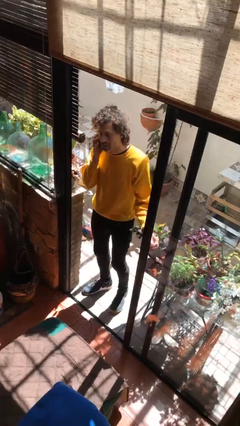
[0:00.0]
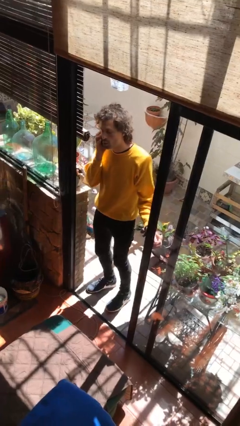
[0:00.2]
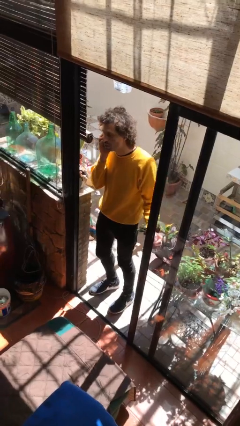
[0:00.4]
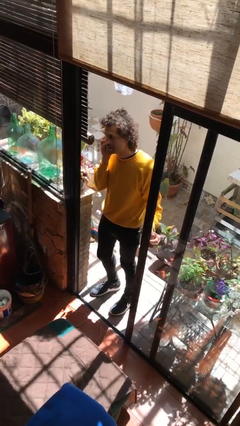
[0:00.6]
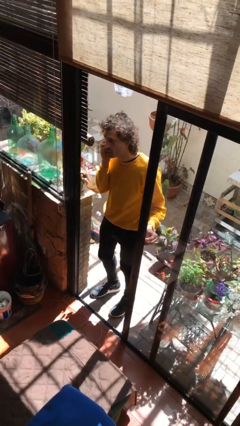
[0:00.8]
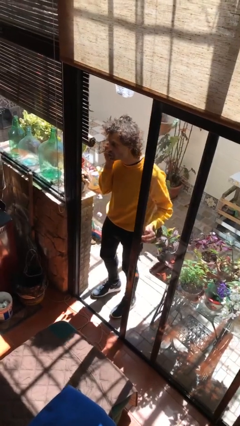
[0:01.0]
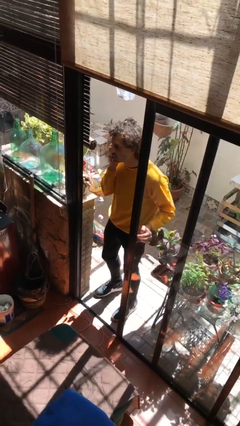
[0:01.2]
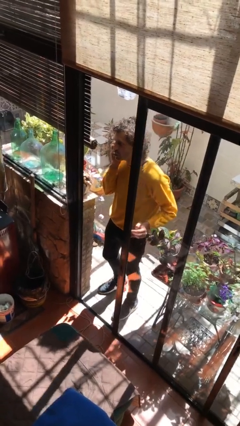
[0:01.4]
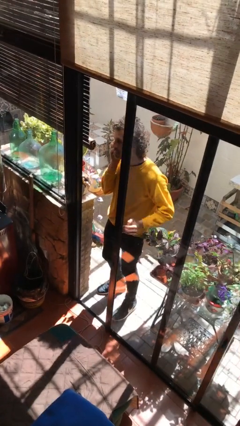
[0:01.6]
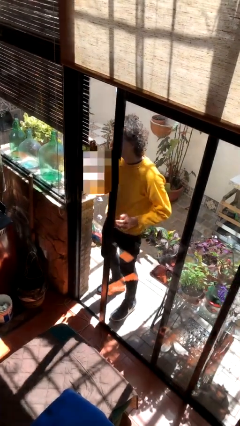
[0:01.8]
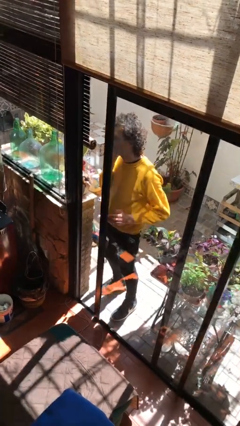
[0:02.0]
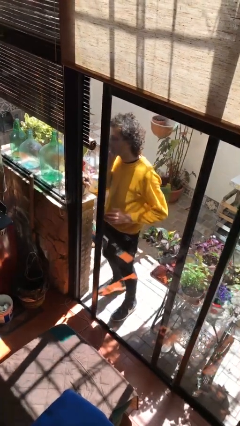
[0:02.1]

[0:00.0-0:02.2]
person closes facility door

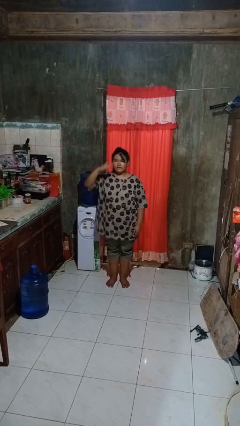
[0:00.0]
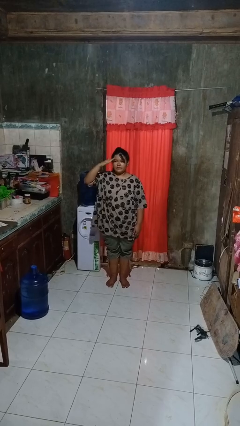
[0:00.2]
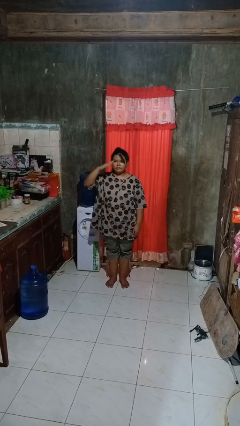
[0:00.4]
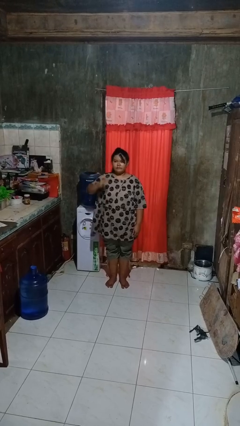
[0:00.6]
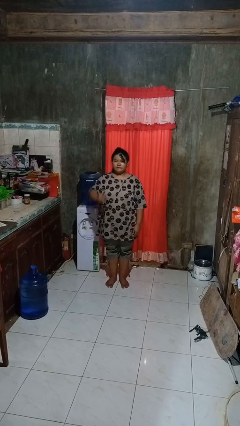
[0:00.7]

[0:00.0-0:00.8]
person salutes

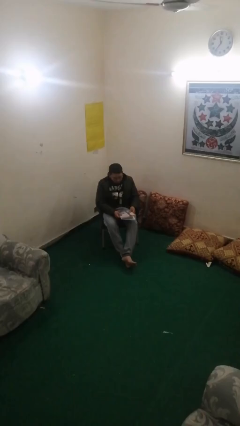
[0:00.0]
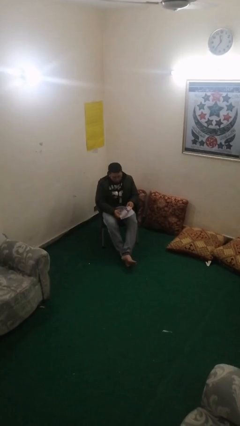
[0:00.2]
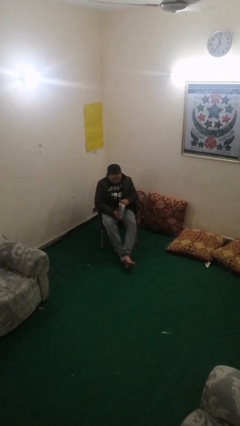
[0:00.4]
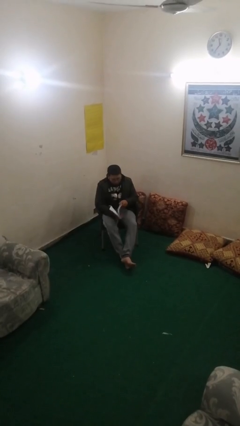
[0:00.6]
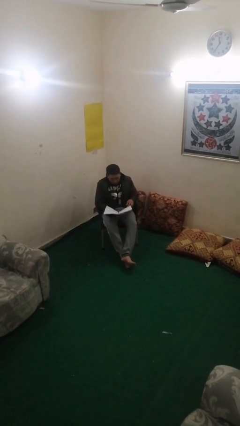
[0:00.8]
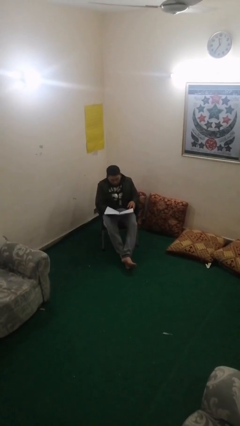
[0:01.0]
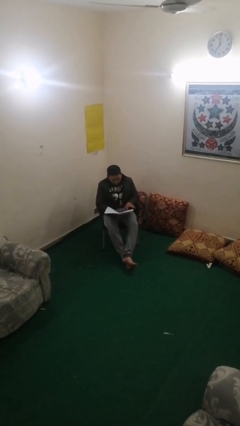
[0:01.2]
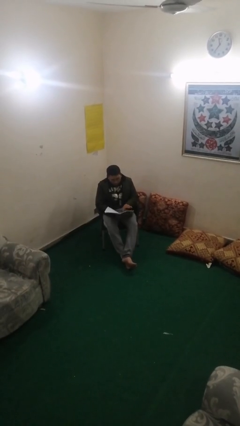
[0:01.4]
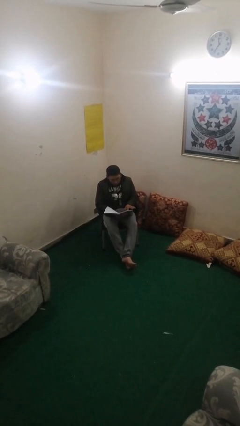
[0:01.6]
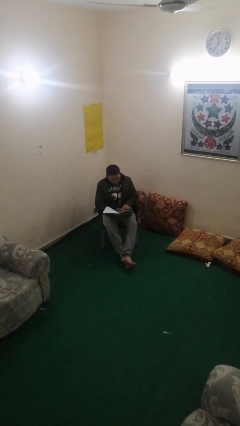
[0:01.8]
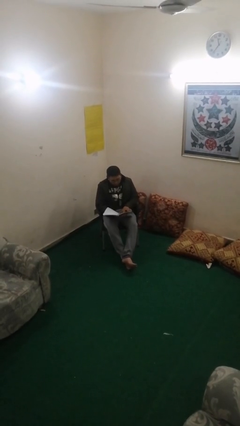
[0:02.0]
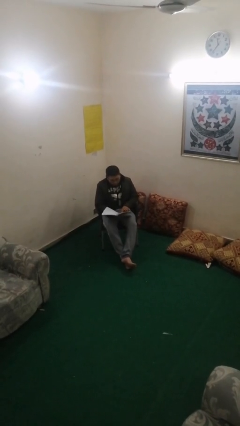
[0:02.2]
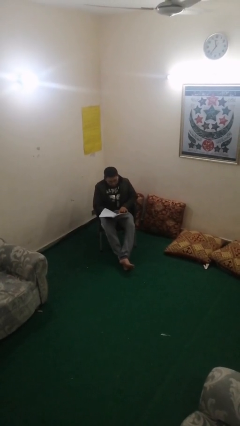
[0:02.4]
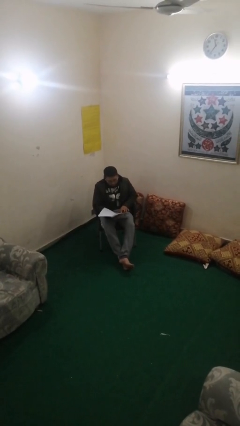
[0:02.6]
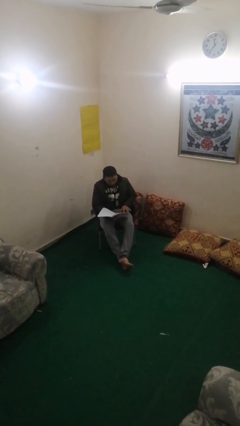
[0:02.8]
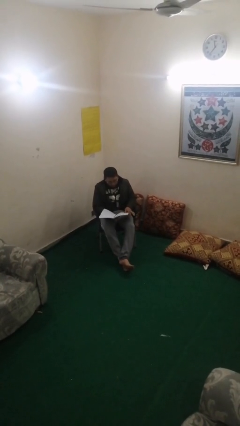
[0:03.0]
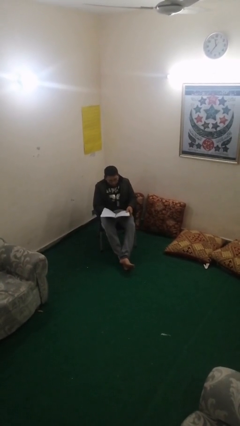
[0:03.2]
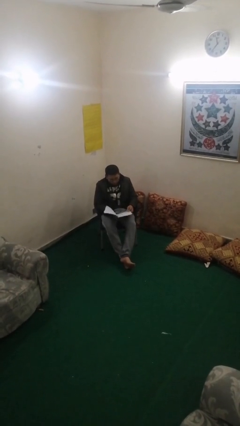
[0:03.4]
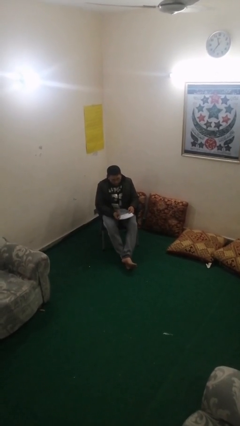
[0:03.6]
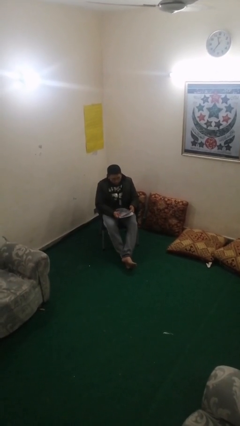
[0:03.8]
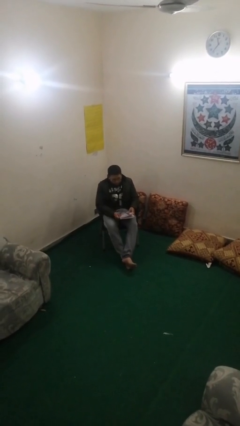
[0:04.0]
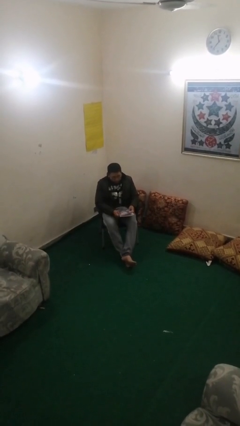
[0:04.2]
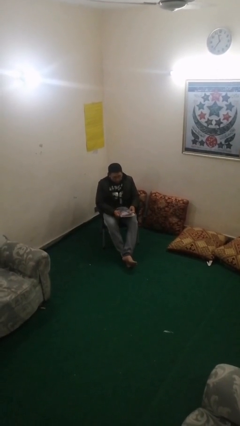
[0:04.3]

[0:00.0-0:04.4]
person reads document

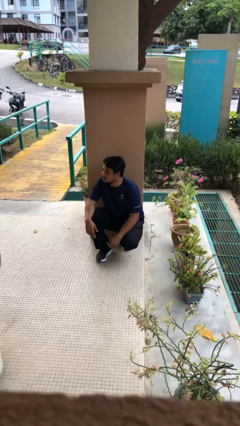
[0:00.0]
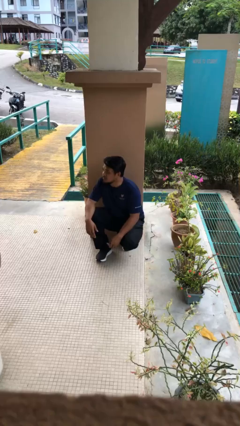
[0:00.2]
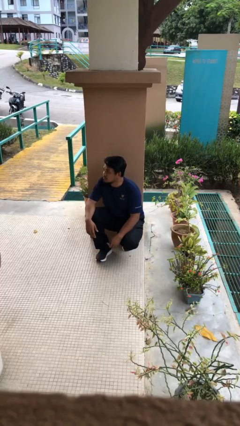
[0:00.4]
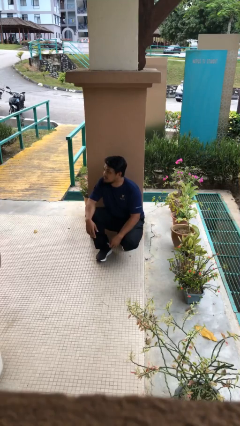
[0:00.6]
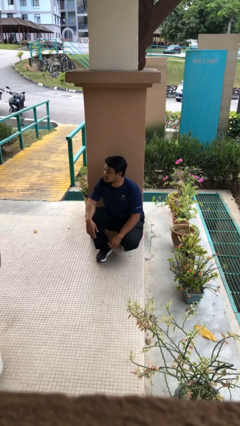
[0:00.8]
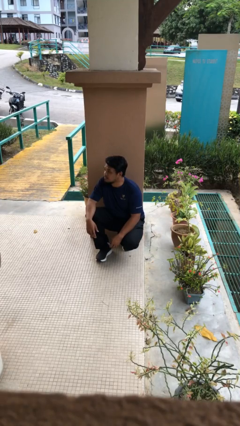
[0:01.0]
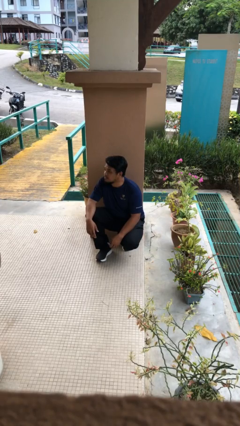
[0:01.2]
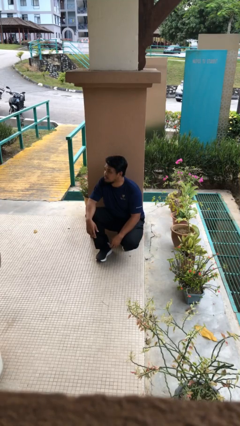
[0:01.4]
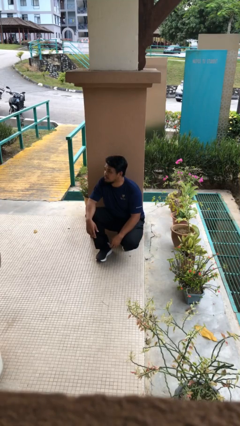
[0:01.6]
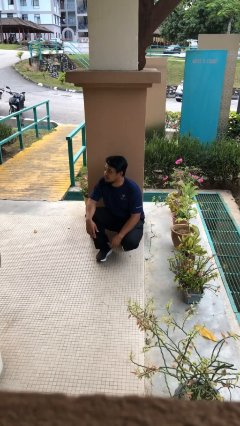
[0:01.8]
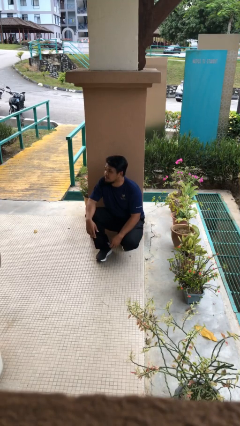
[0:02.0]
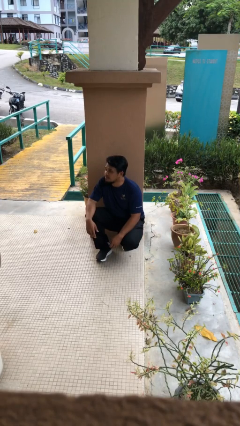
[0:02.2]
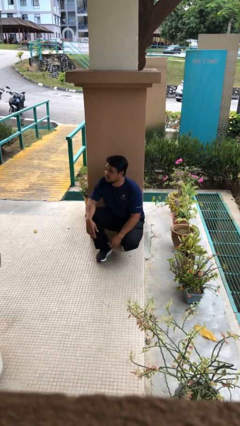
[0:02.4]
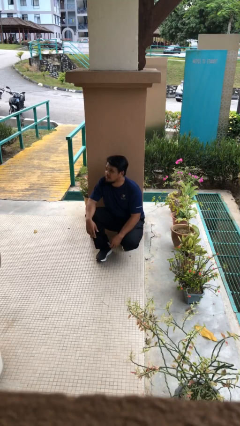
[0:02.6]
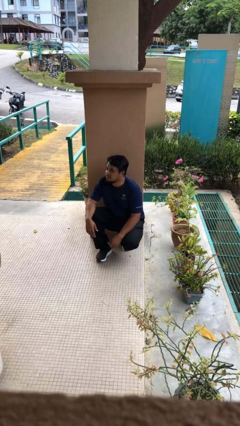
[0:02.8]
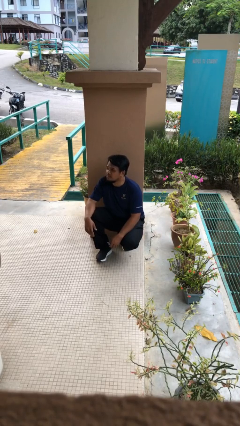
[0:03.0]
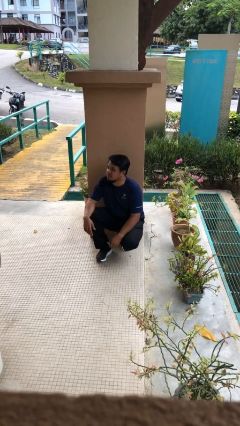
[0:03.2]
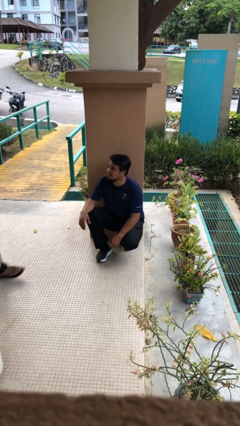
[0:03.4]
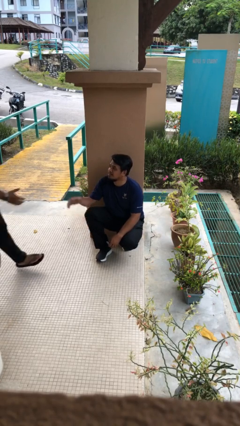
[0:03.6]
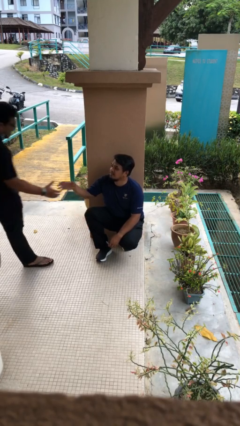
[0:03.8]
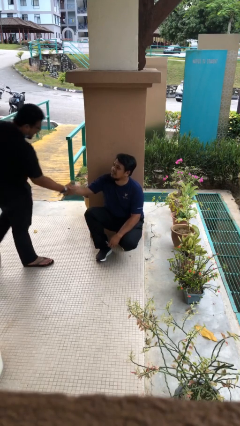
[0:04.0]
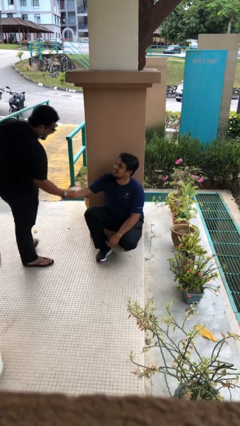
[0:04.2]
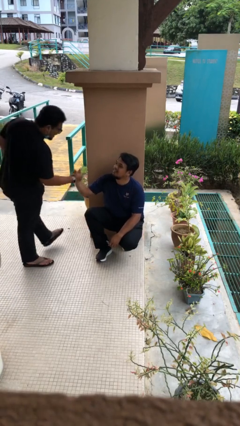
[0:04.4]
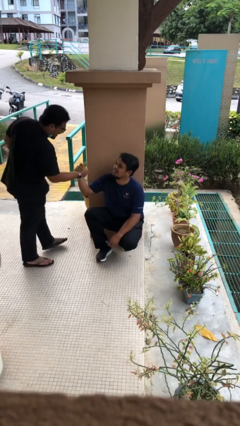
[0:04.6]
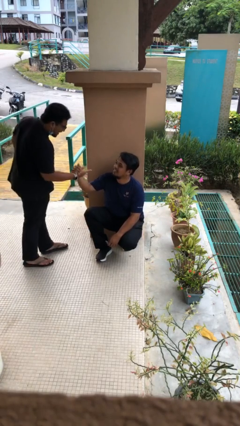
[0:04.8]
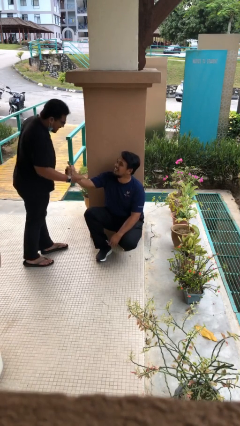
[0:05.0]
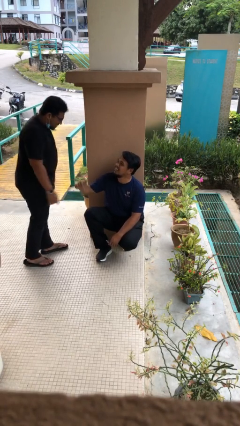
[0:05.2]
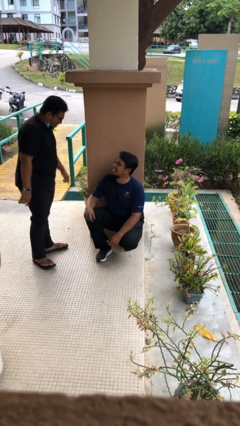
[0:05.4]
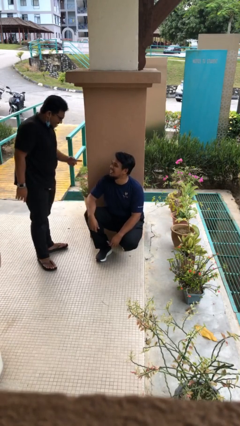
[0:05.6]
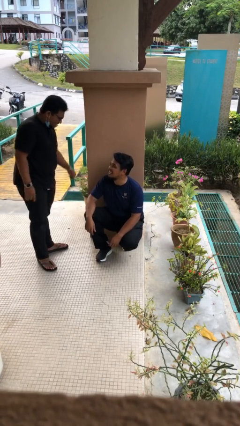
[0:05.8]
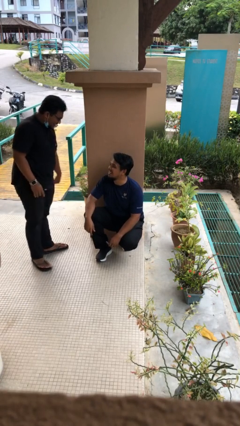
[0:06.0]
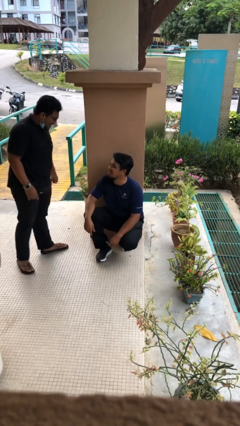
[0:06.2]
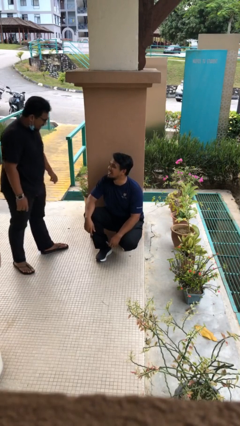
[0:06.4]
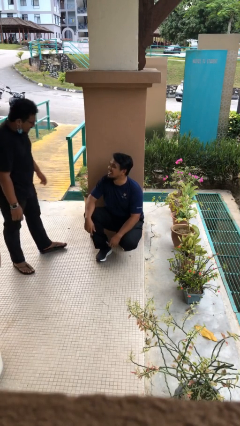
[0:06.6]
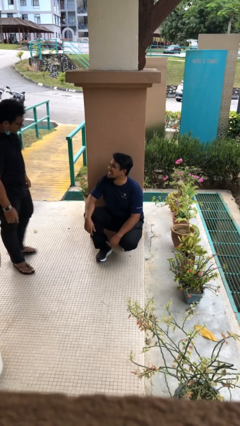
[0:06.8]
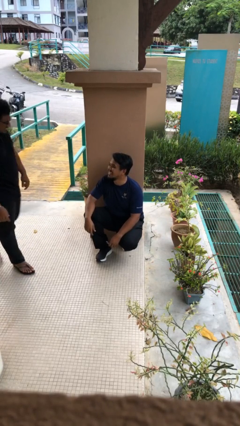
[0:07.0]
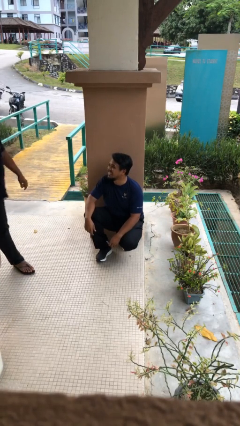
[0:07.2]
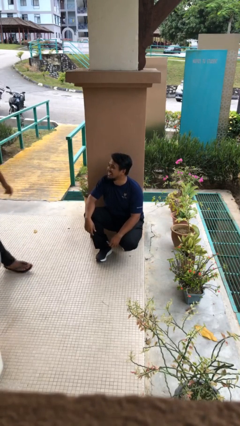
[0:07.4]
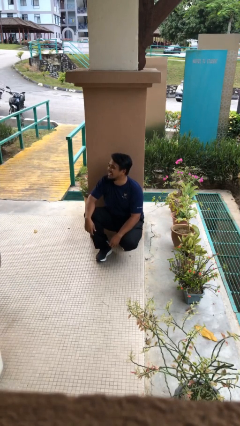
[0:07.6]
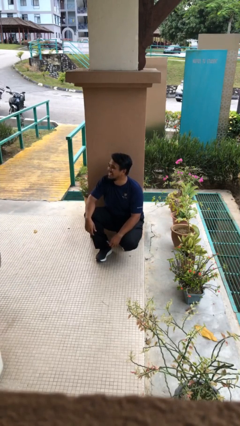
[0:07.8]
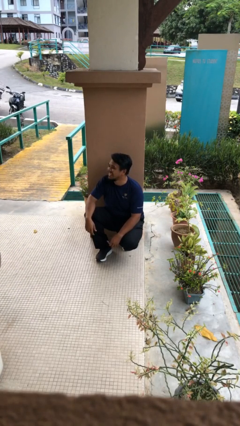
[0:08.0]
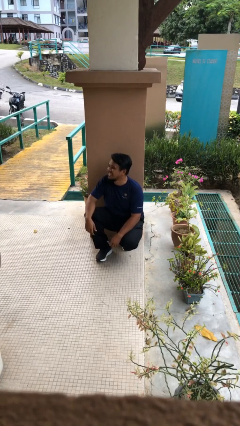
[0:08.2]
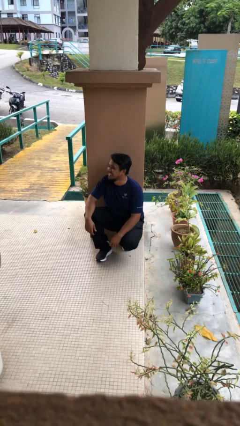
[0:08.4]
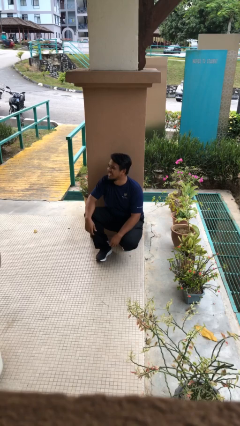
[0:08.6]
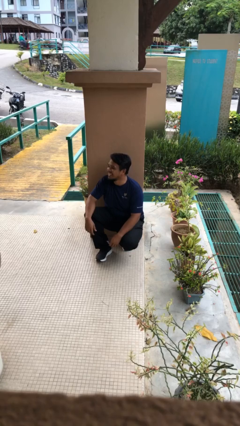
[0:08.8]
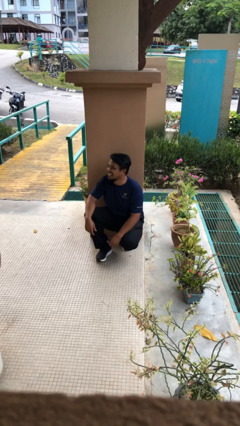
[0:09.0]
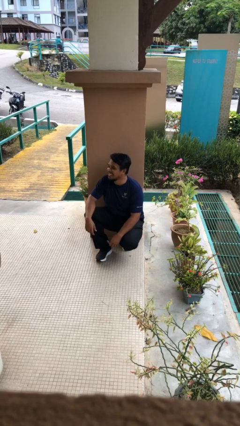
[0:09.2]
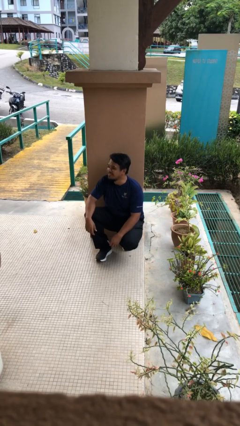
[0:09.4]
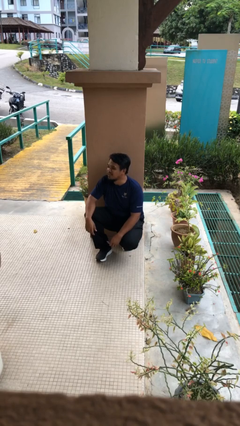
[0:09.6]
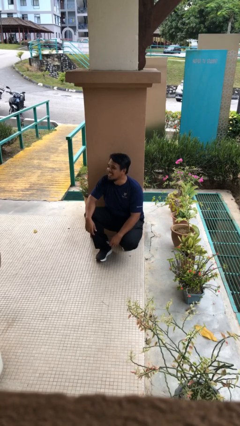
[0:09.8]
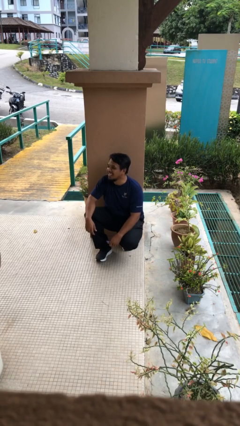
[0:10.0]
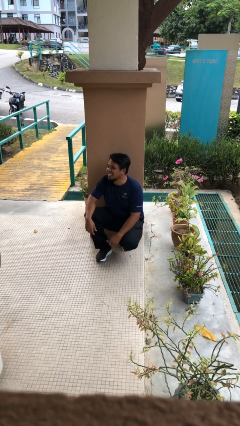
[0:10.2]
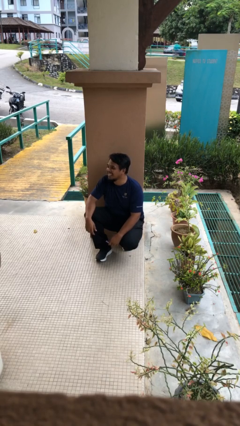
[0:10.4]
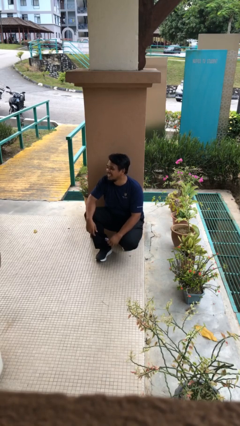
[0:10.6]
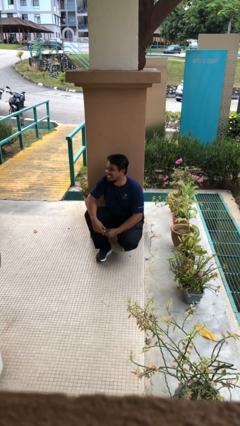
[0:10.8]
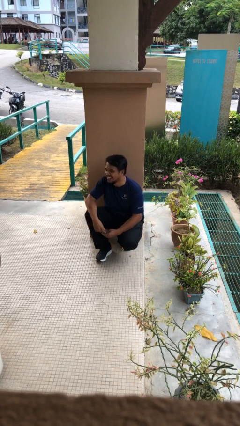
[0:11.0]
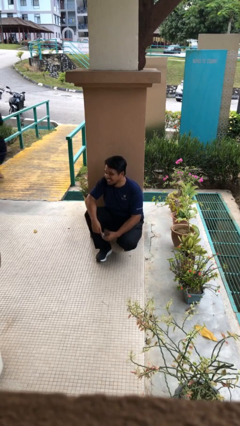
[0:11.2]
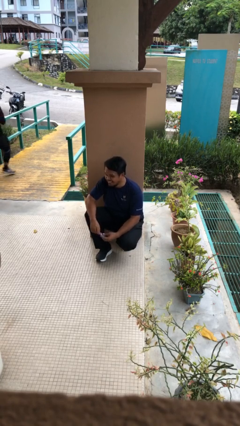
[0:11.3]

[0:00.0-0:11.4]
person shakes hand
